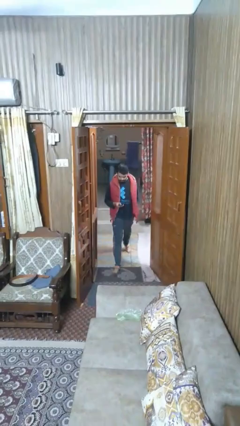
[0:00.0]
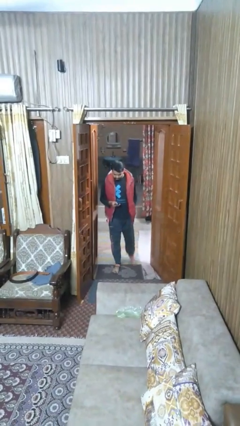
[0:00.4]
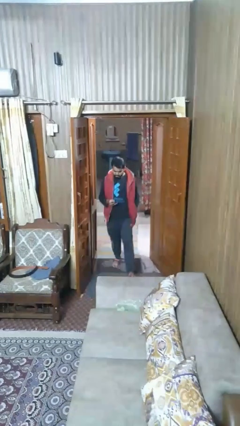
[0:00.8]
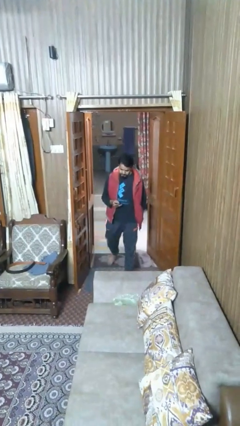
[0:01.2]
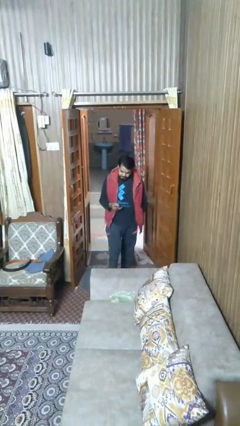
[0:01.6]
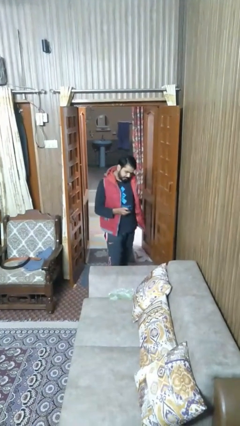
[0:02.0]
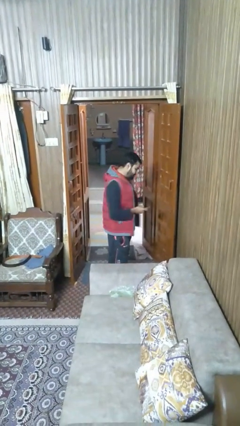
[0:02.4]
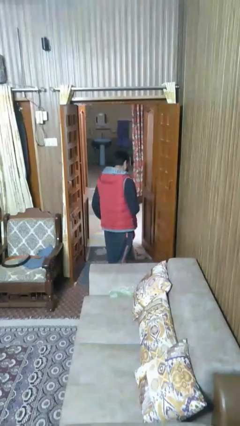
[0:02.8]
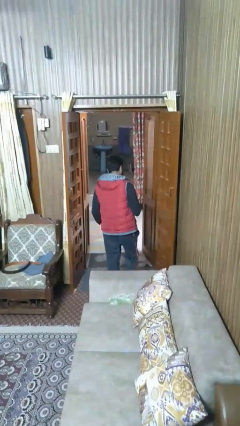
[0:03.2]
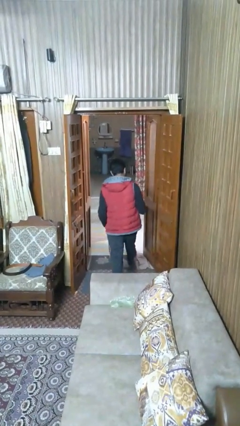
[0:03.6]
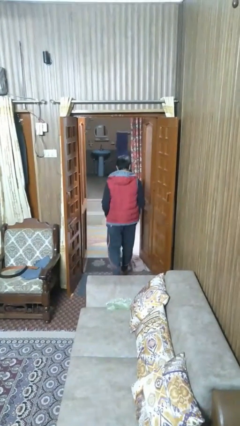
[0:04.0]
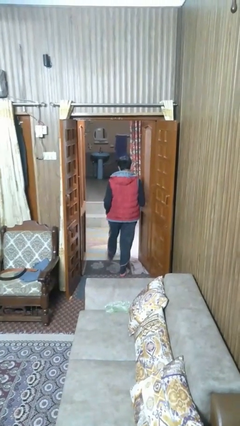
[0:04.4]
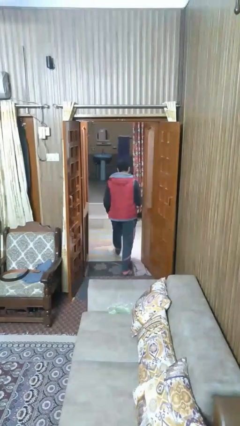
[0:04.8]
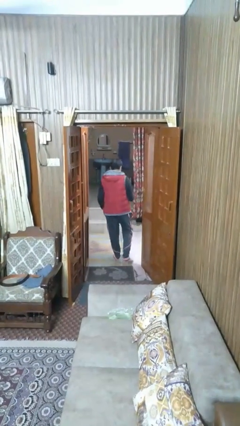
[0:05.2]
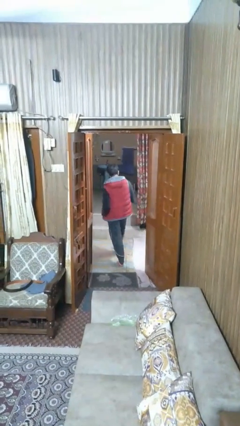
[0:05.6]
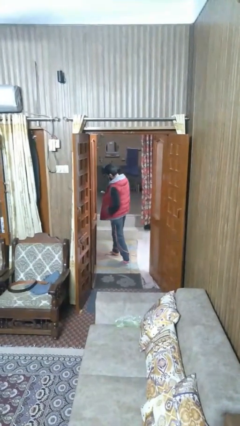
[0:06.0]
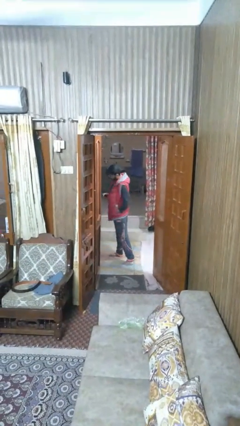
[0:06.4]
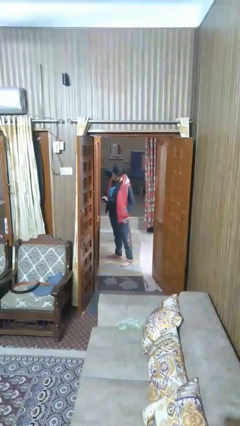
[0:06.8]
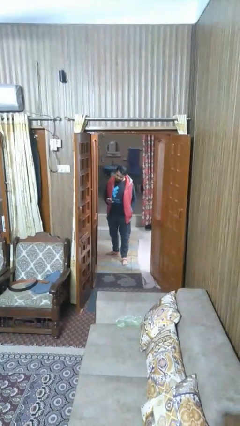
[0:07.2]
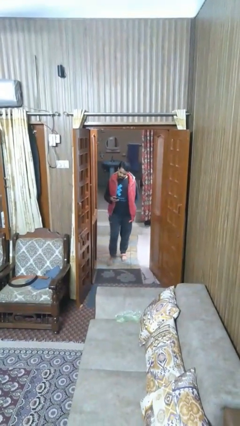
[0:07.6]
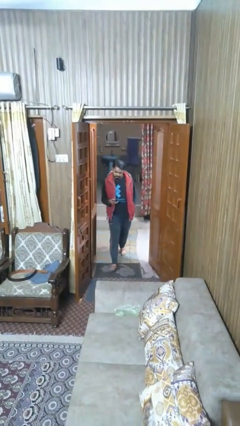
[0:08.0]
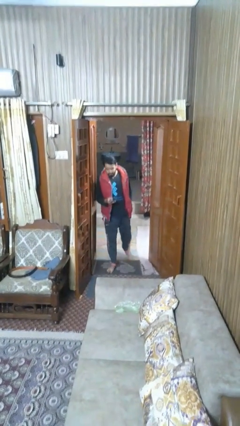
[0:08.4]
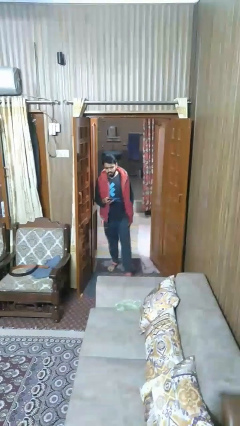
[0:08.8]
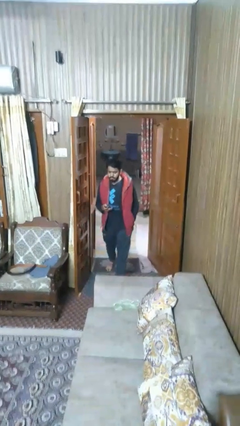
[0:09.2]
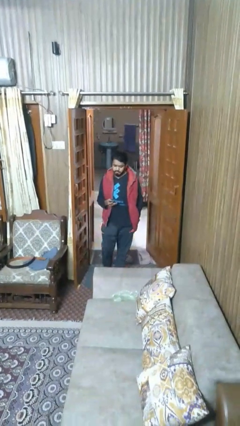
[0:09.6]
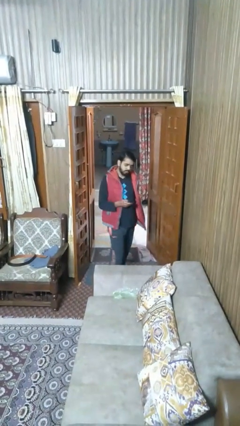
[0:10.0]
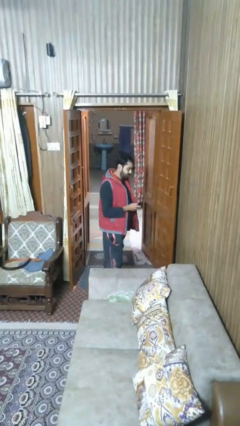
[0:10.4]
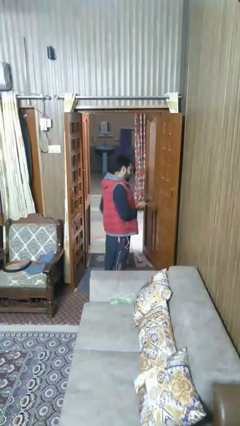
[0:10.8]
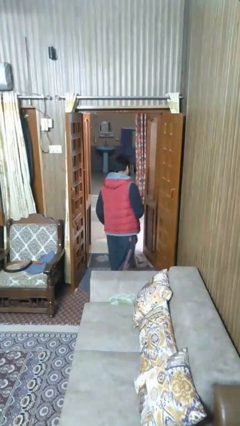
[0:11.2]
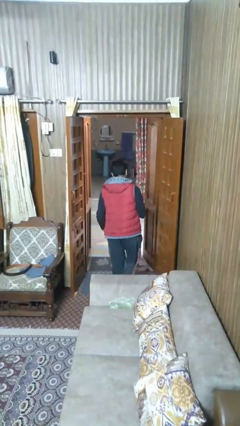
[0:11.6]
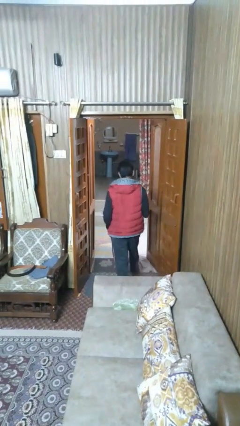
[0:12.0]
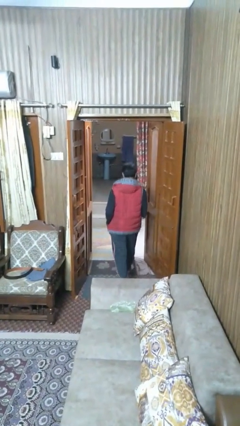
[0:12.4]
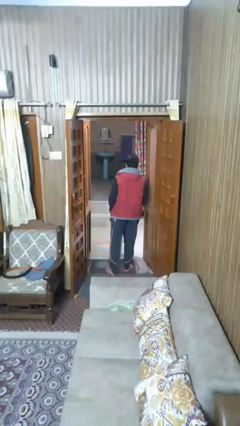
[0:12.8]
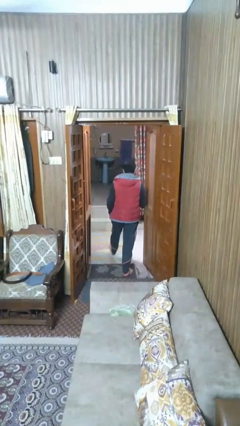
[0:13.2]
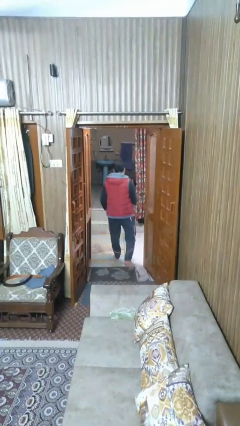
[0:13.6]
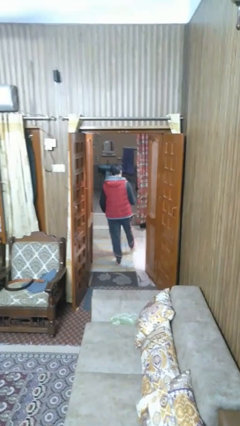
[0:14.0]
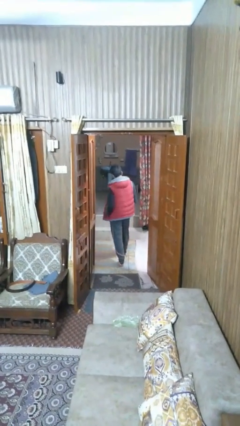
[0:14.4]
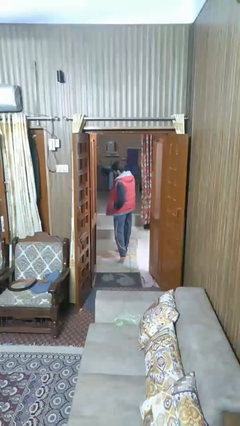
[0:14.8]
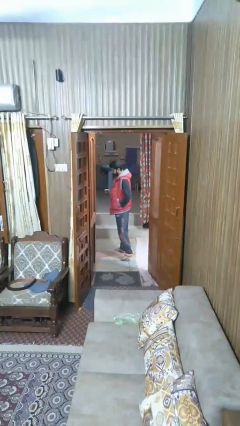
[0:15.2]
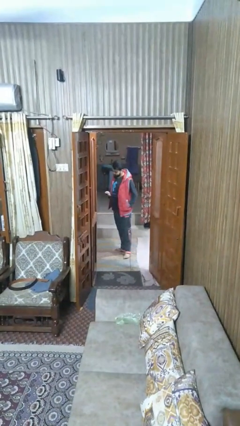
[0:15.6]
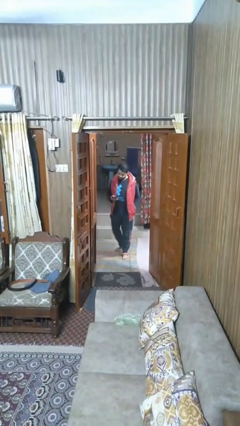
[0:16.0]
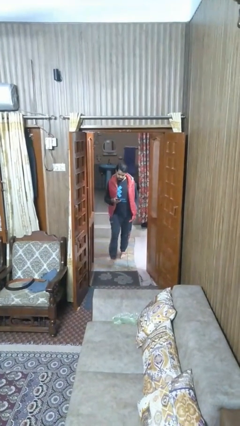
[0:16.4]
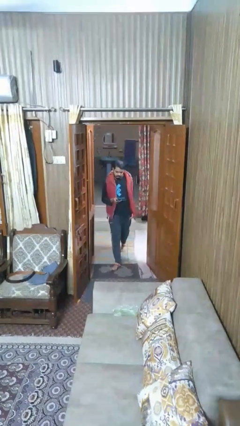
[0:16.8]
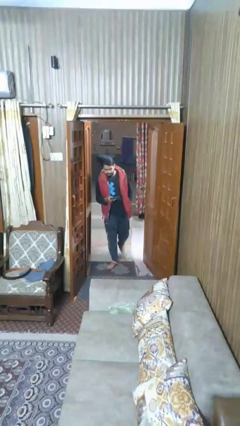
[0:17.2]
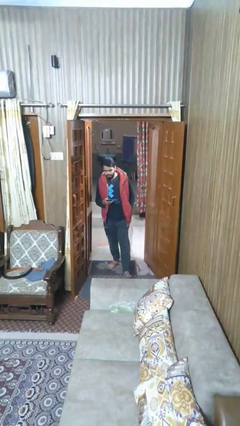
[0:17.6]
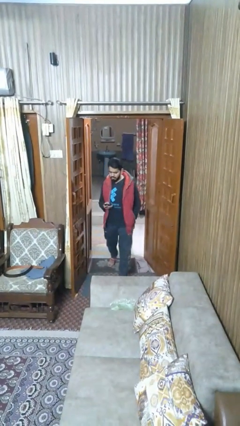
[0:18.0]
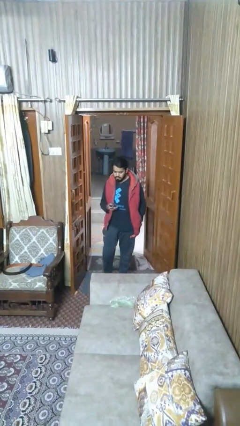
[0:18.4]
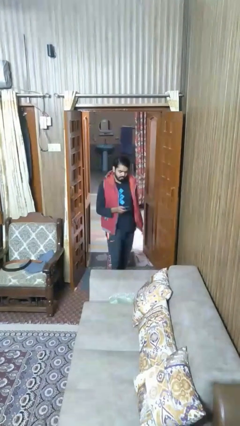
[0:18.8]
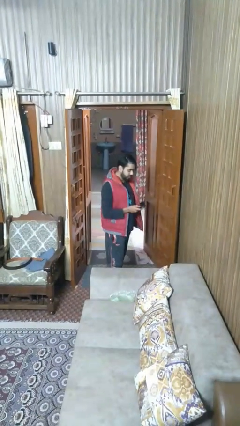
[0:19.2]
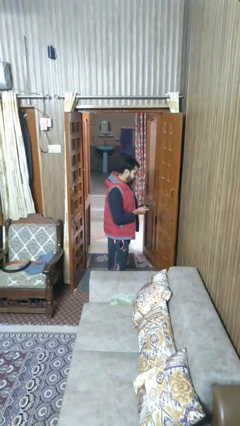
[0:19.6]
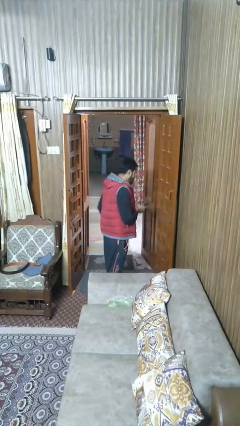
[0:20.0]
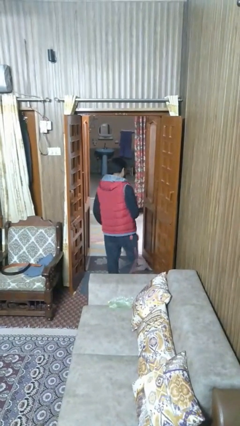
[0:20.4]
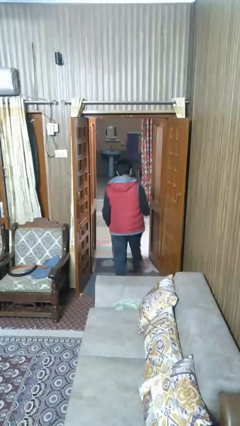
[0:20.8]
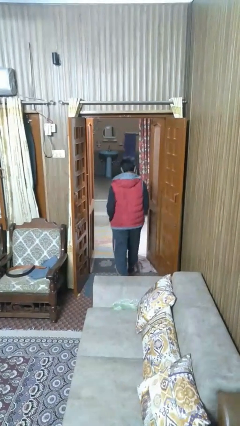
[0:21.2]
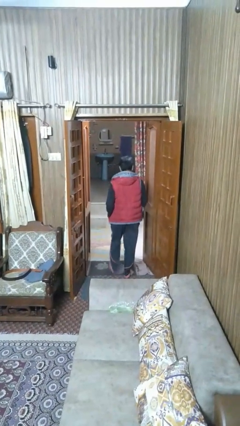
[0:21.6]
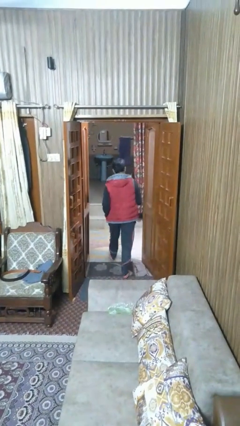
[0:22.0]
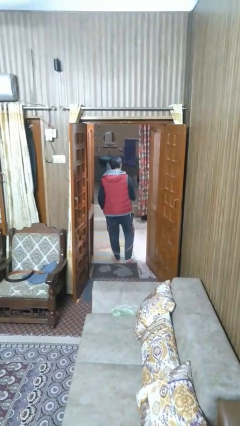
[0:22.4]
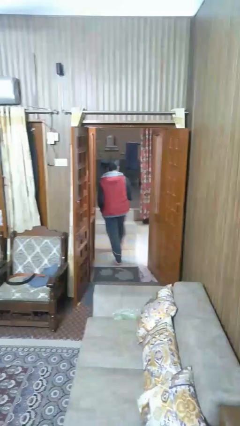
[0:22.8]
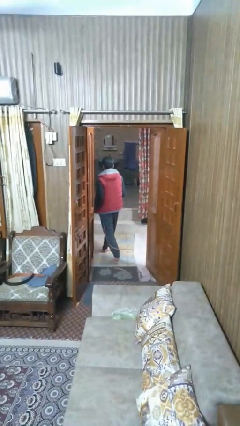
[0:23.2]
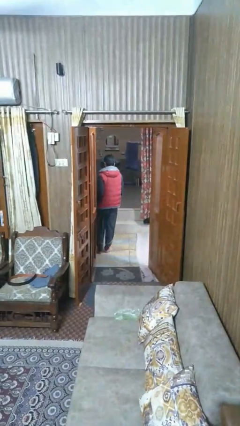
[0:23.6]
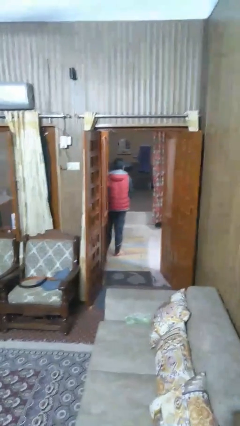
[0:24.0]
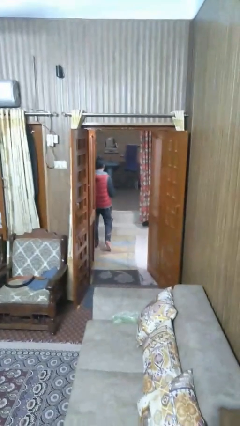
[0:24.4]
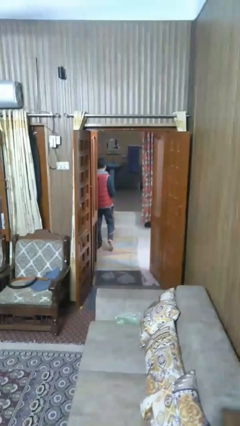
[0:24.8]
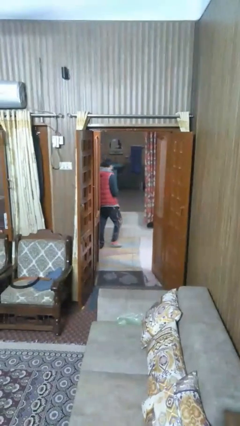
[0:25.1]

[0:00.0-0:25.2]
person texts on phone

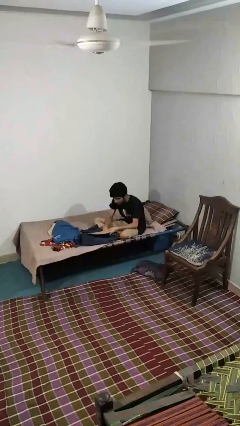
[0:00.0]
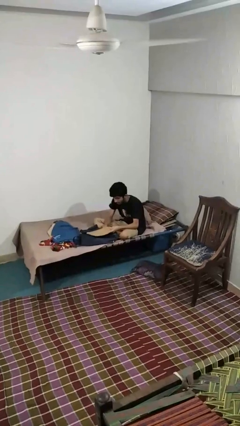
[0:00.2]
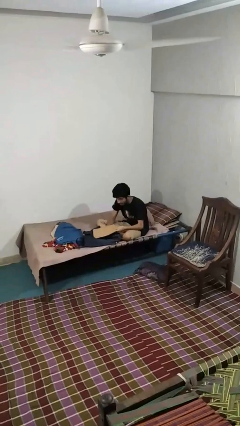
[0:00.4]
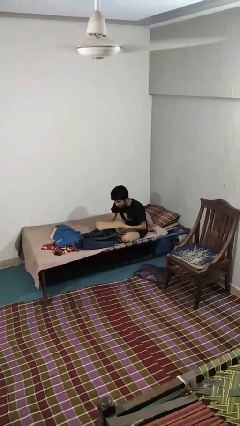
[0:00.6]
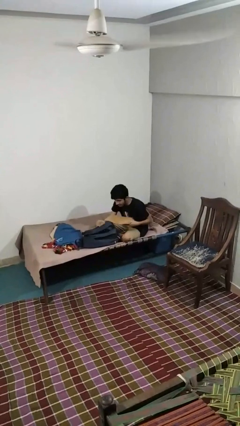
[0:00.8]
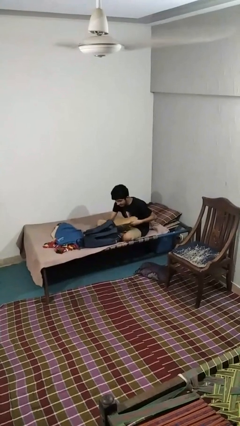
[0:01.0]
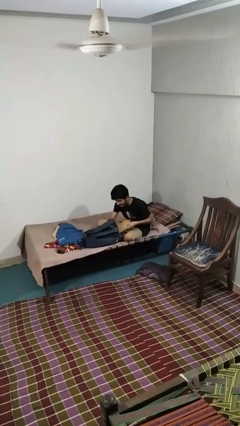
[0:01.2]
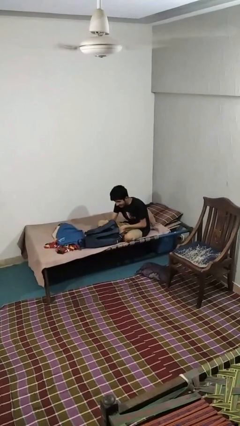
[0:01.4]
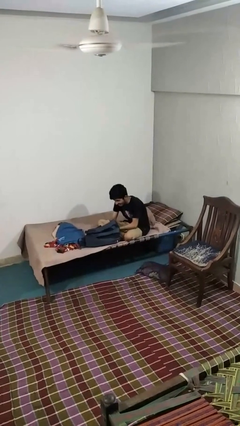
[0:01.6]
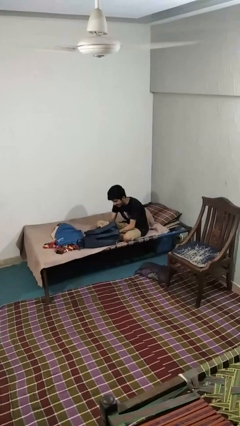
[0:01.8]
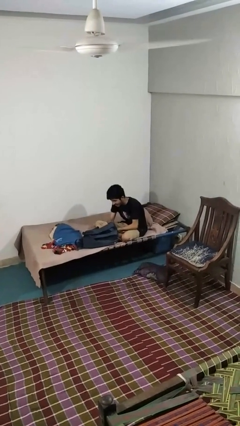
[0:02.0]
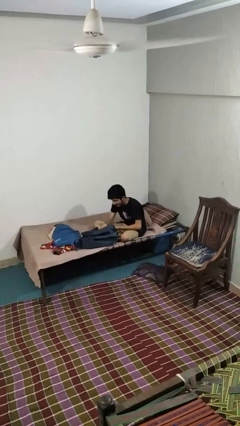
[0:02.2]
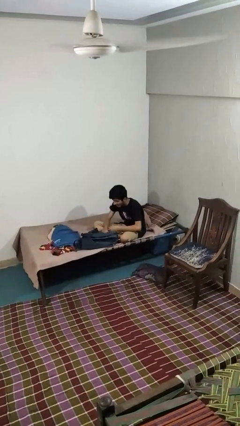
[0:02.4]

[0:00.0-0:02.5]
person puts object into backpack

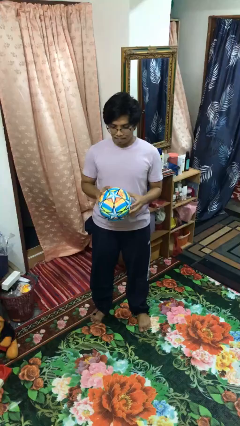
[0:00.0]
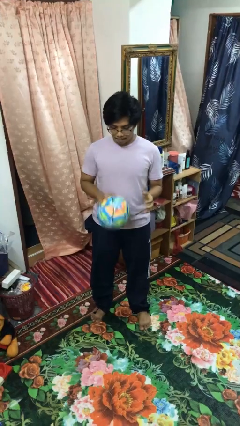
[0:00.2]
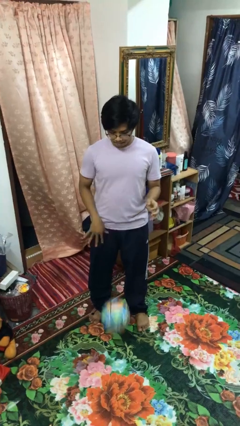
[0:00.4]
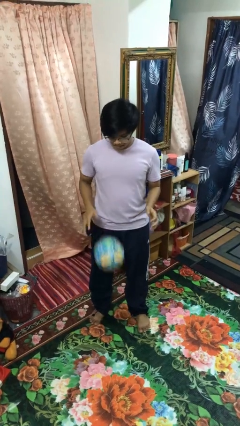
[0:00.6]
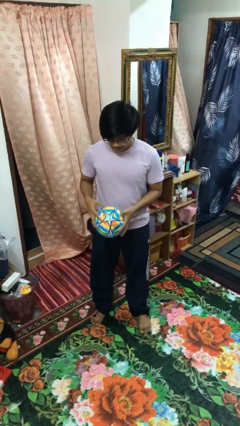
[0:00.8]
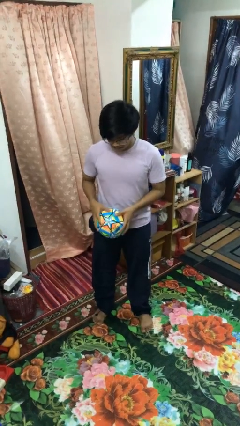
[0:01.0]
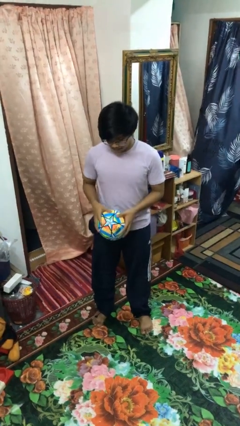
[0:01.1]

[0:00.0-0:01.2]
person bounces ball on floor

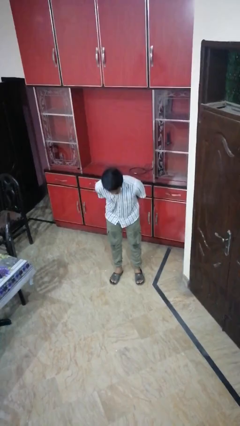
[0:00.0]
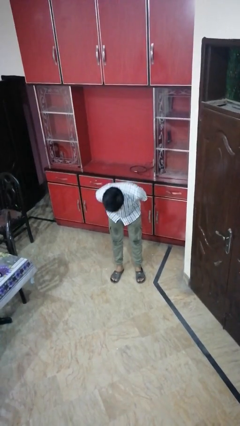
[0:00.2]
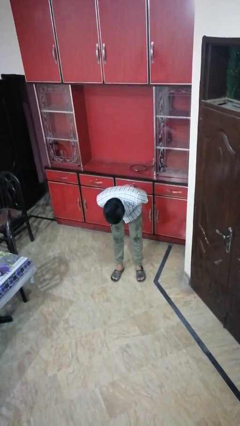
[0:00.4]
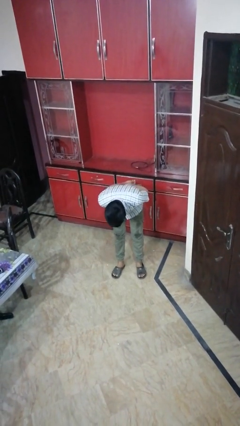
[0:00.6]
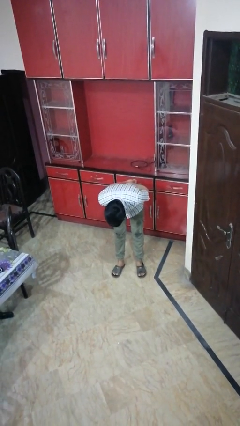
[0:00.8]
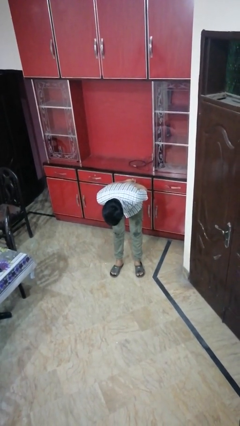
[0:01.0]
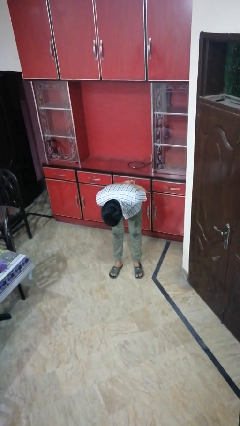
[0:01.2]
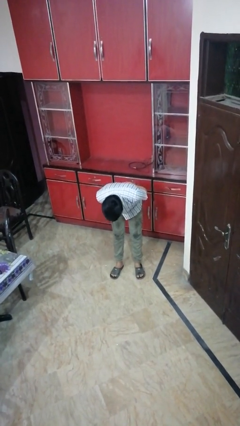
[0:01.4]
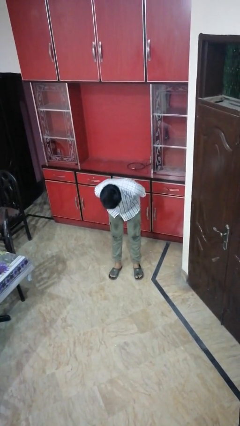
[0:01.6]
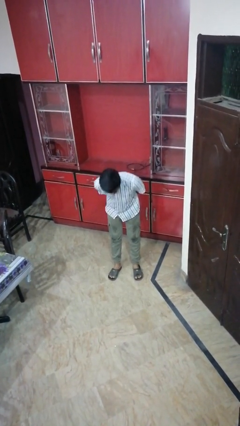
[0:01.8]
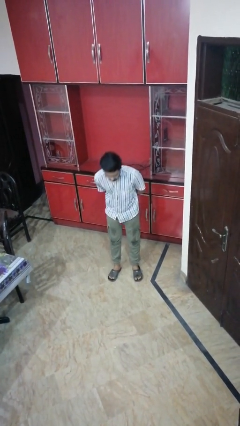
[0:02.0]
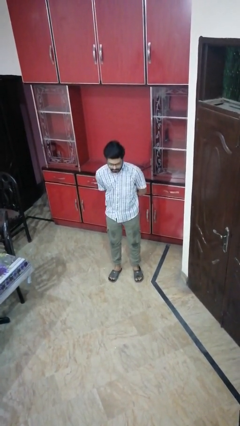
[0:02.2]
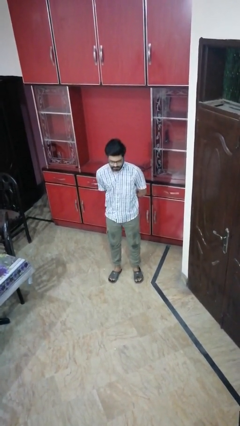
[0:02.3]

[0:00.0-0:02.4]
person bows
